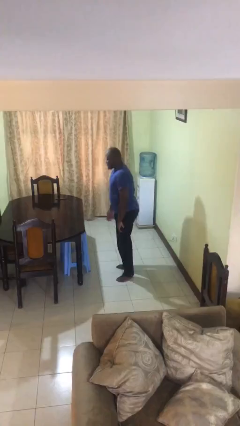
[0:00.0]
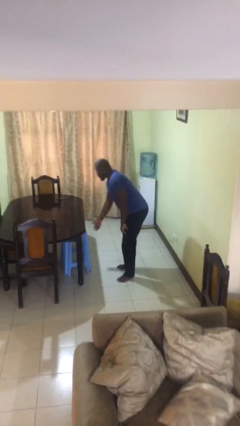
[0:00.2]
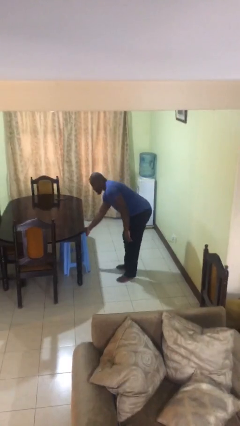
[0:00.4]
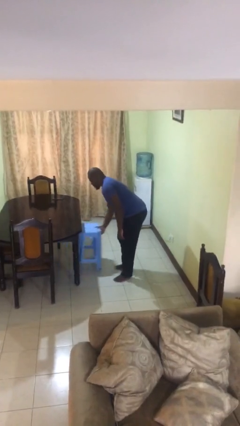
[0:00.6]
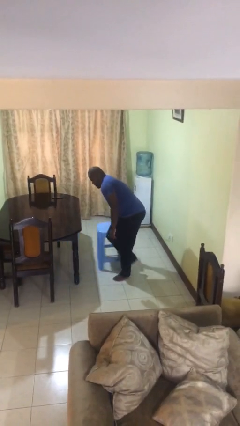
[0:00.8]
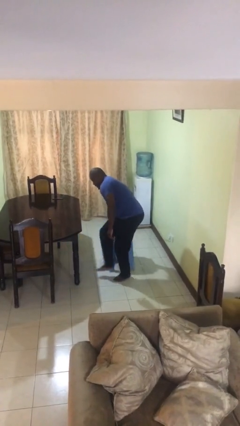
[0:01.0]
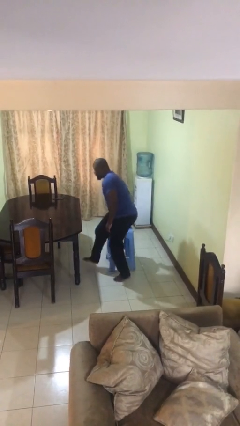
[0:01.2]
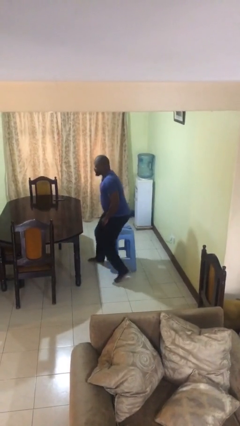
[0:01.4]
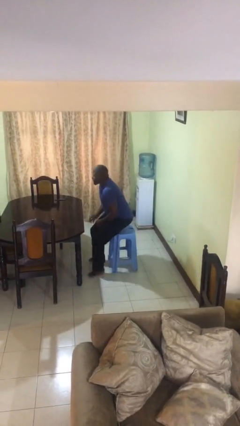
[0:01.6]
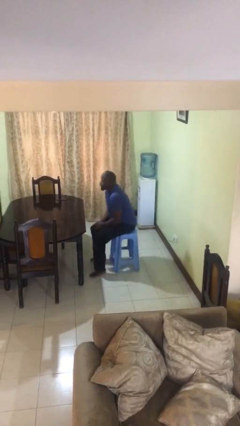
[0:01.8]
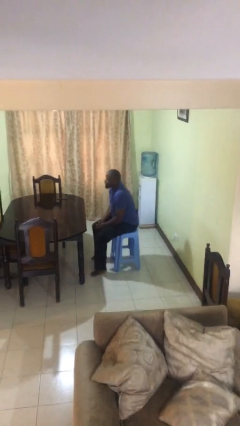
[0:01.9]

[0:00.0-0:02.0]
person sits down

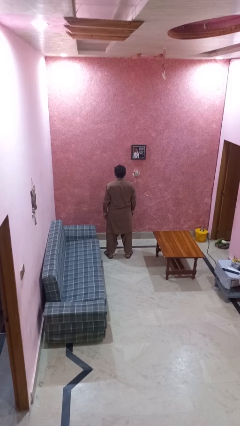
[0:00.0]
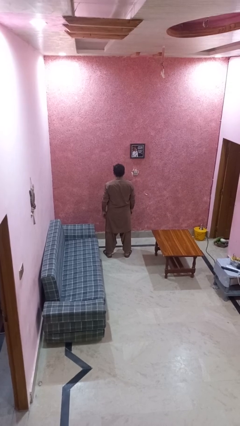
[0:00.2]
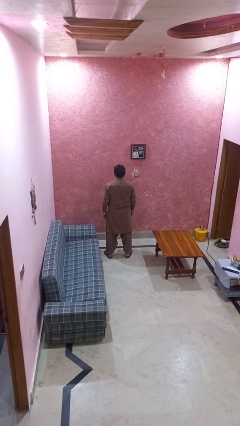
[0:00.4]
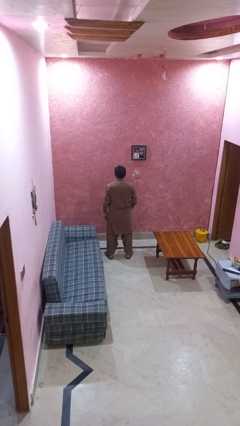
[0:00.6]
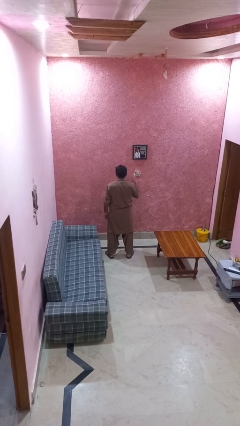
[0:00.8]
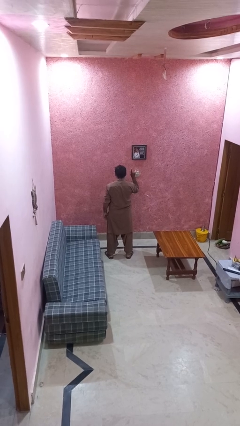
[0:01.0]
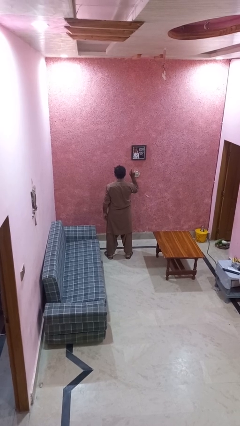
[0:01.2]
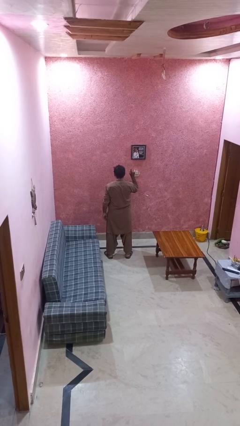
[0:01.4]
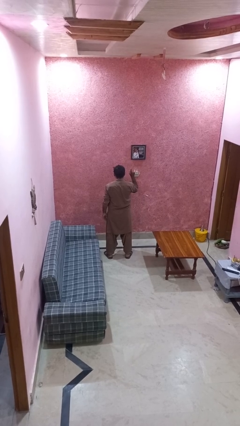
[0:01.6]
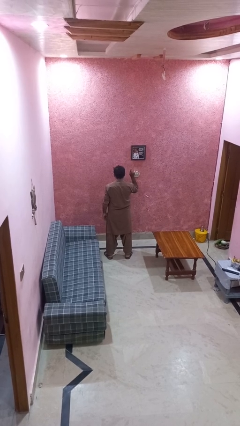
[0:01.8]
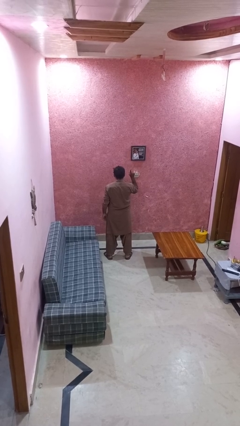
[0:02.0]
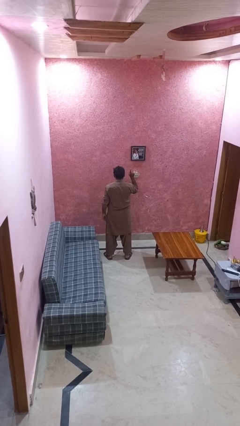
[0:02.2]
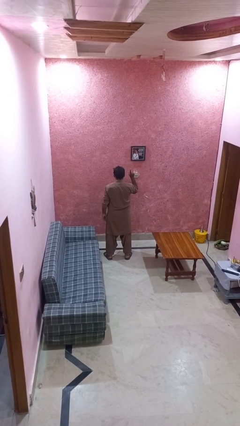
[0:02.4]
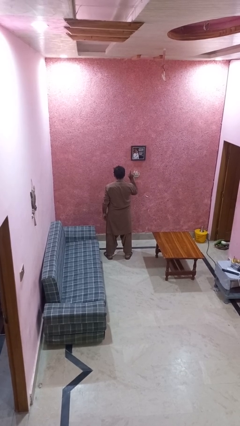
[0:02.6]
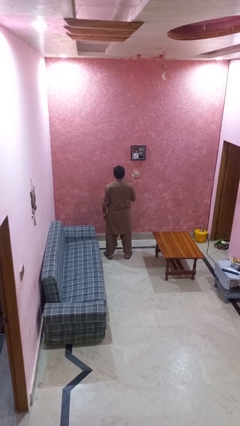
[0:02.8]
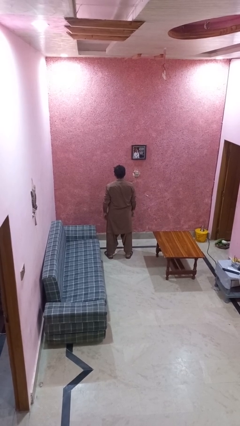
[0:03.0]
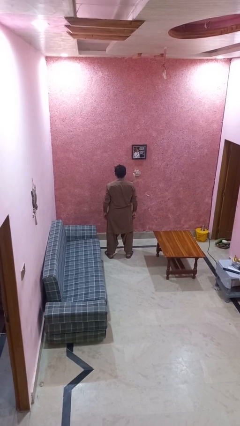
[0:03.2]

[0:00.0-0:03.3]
person gestures number one

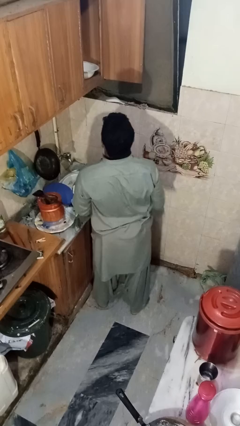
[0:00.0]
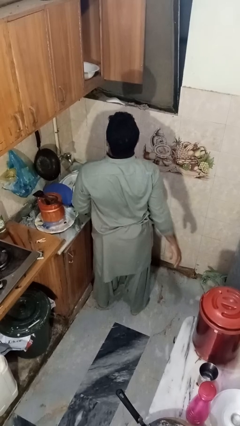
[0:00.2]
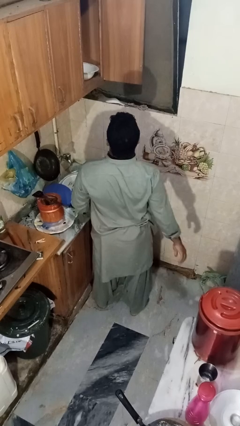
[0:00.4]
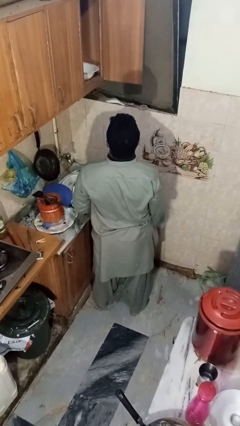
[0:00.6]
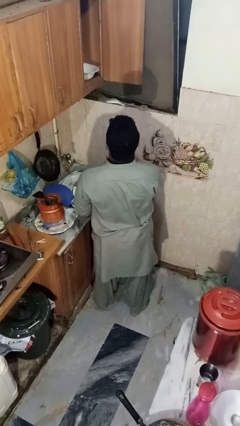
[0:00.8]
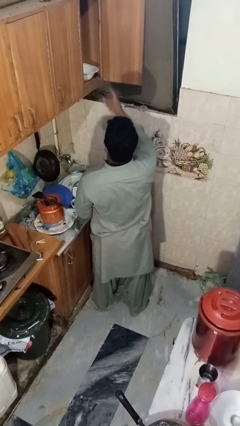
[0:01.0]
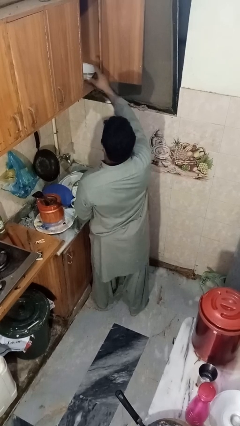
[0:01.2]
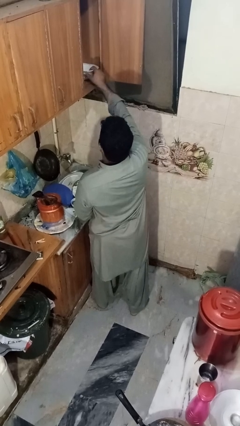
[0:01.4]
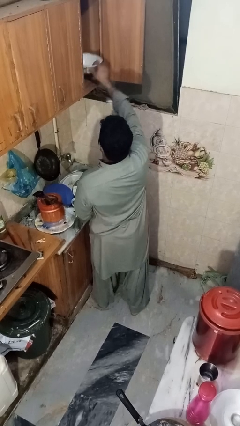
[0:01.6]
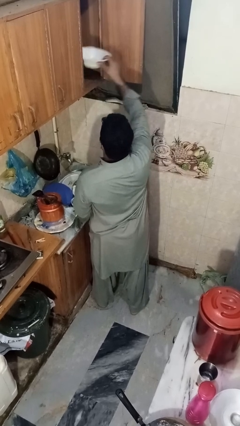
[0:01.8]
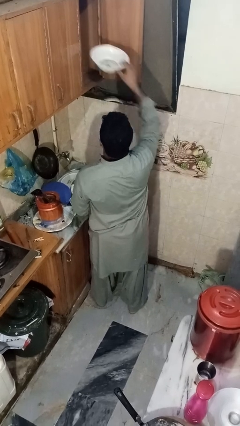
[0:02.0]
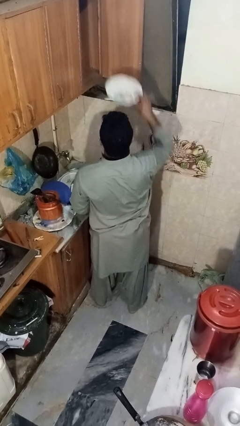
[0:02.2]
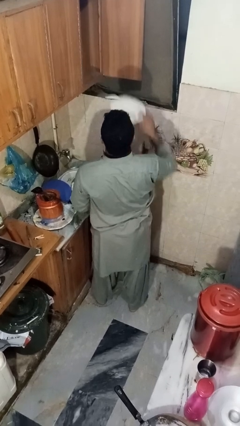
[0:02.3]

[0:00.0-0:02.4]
person takes object from cabinet

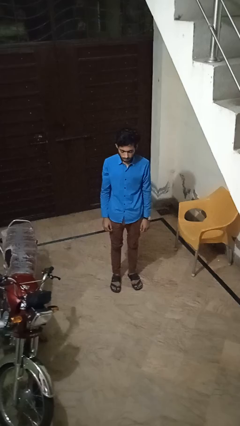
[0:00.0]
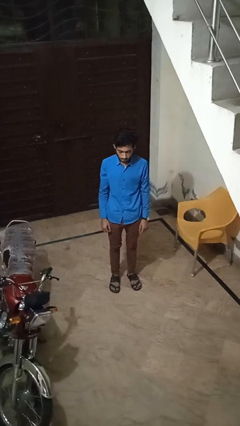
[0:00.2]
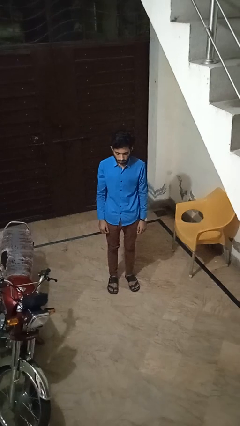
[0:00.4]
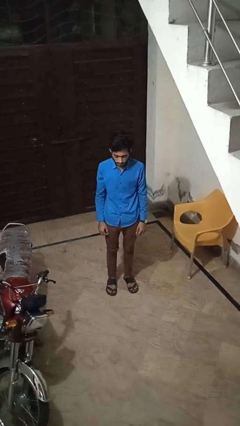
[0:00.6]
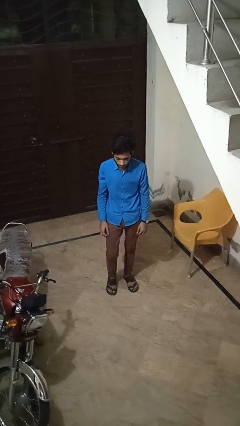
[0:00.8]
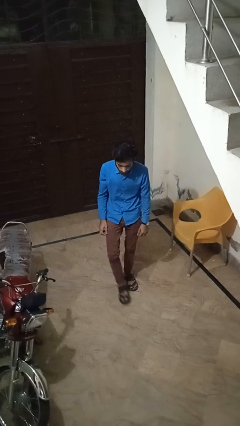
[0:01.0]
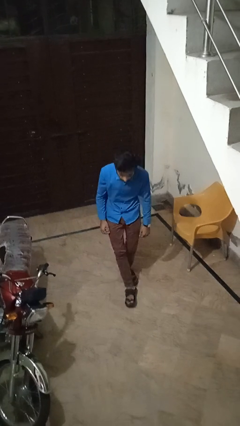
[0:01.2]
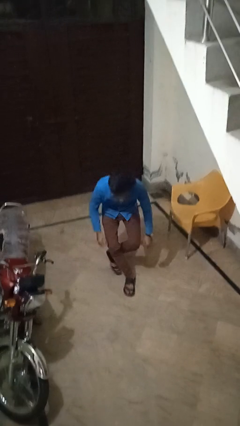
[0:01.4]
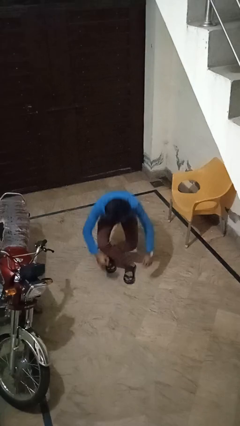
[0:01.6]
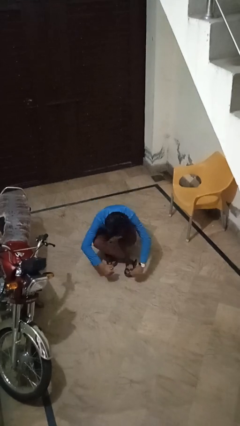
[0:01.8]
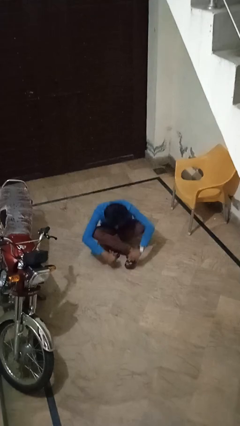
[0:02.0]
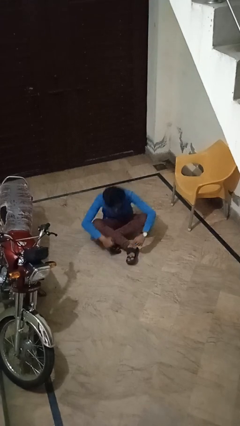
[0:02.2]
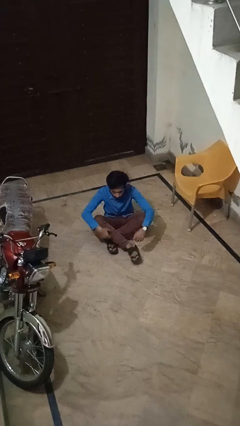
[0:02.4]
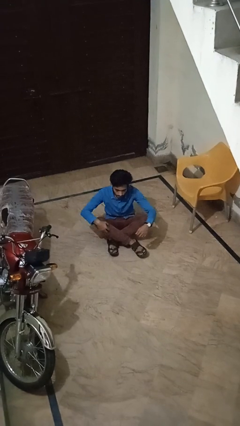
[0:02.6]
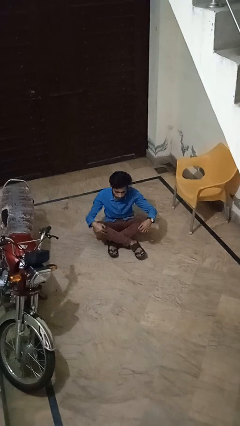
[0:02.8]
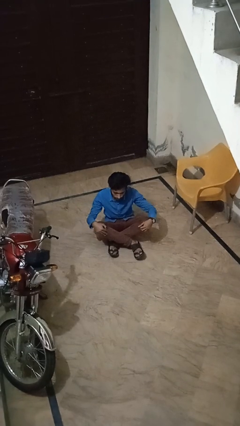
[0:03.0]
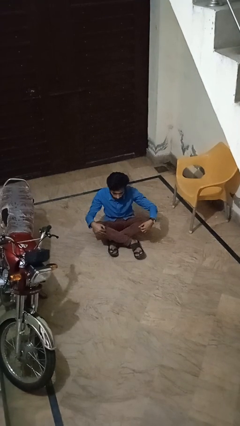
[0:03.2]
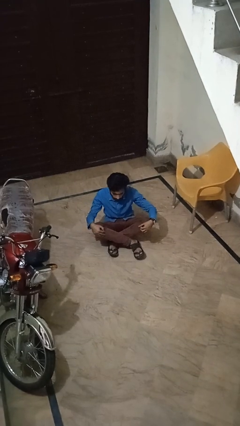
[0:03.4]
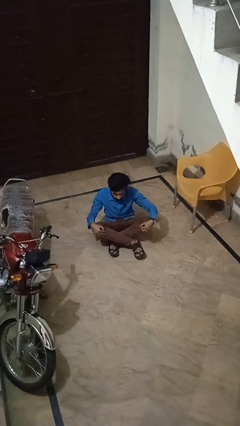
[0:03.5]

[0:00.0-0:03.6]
person sits crisscross

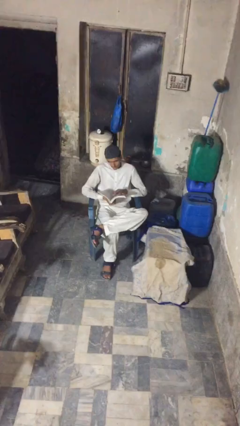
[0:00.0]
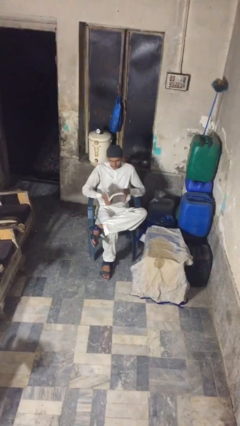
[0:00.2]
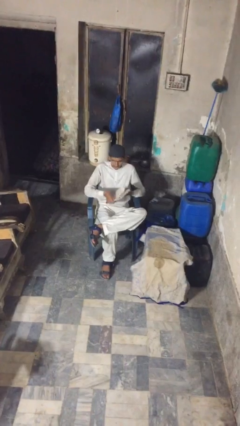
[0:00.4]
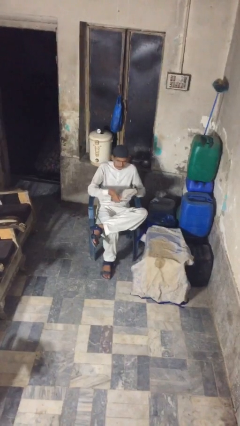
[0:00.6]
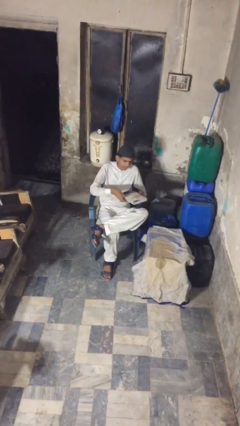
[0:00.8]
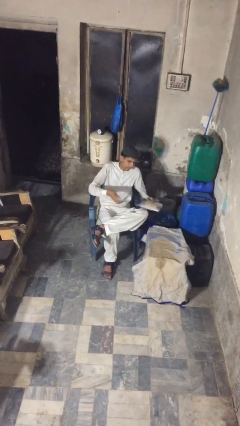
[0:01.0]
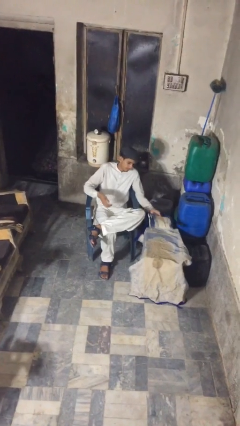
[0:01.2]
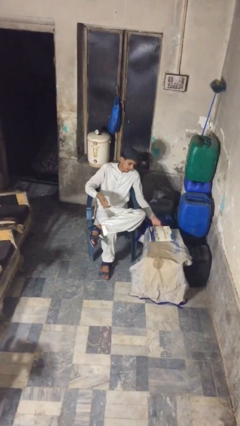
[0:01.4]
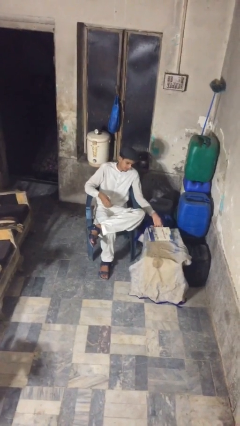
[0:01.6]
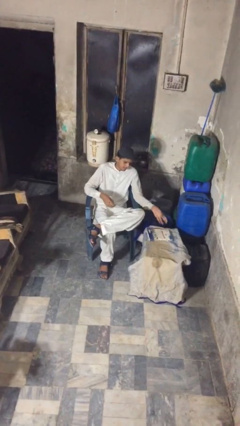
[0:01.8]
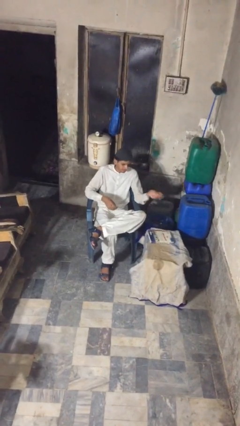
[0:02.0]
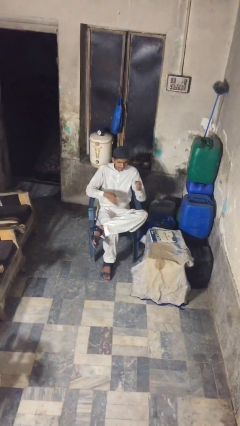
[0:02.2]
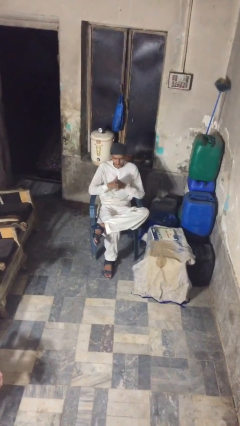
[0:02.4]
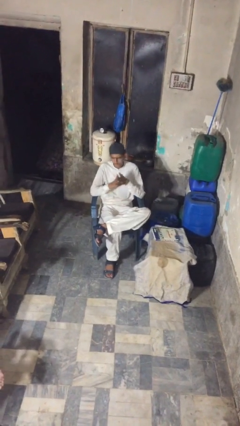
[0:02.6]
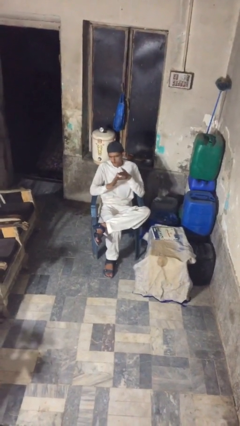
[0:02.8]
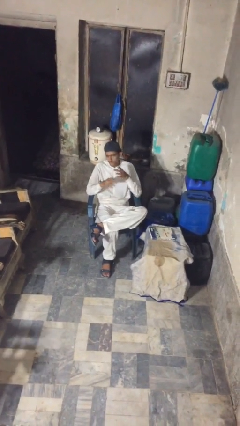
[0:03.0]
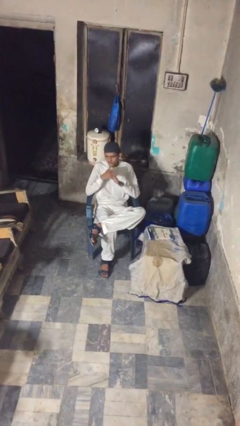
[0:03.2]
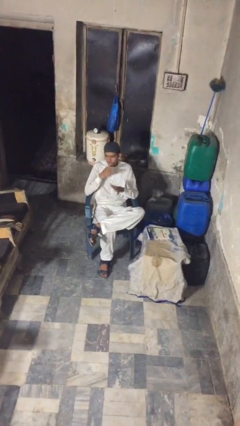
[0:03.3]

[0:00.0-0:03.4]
person puts down object on table

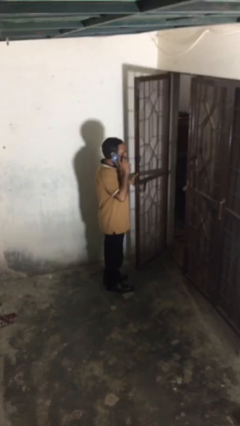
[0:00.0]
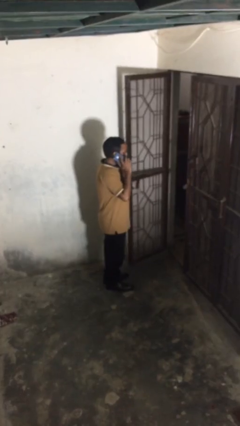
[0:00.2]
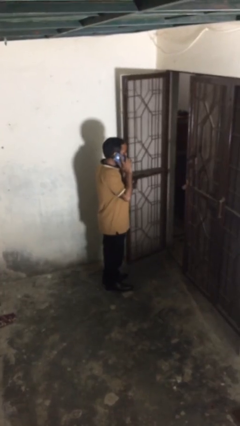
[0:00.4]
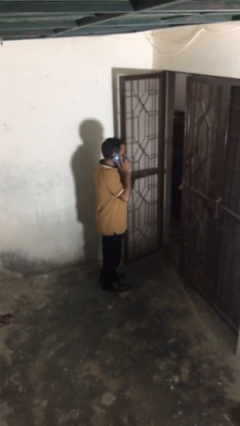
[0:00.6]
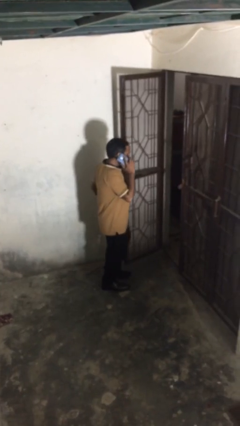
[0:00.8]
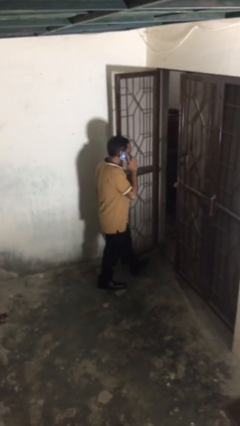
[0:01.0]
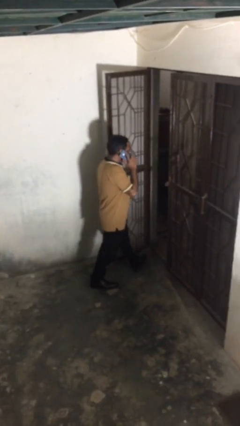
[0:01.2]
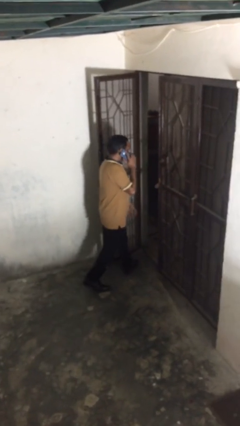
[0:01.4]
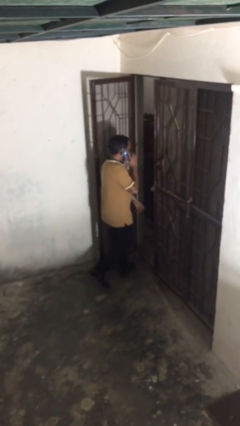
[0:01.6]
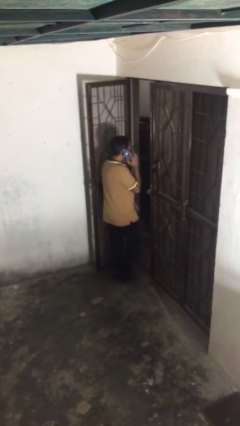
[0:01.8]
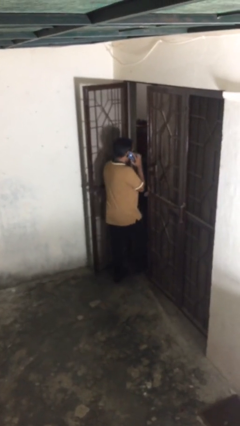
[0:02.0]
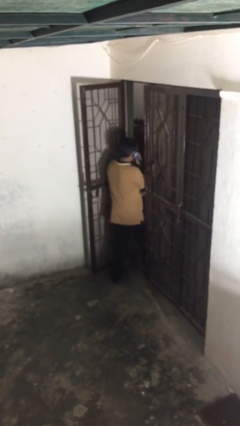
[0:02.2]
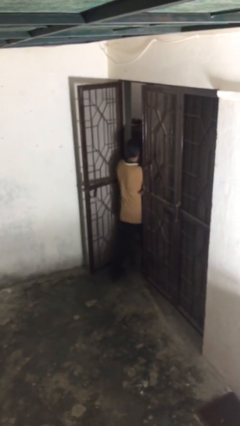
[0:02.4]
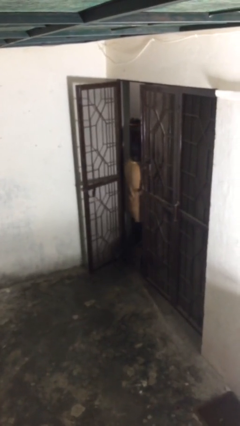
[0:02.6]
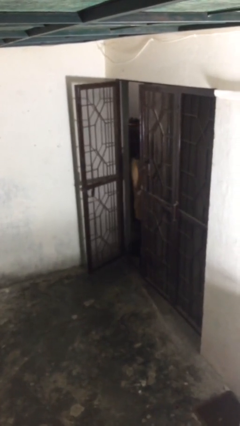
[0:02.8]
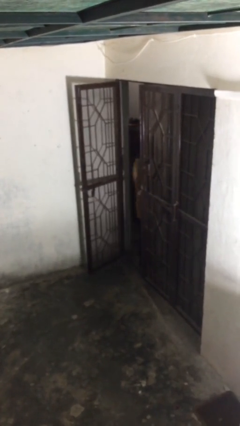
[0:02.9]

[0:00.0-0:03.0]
person exits scene through structure
